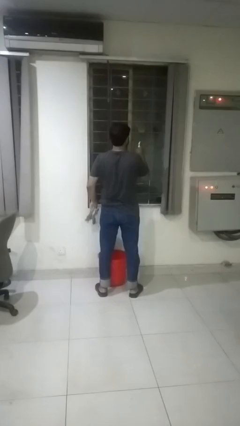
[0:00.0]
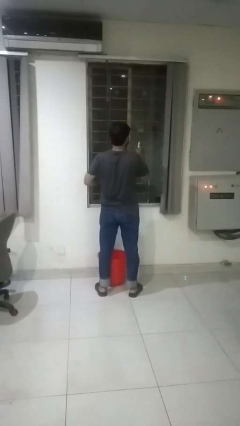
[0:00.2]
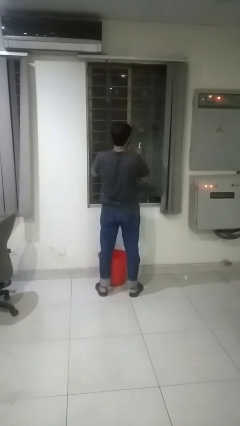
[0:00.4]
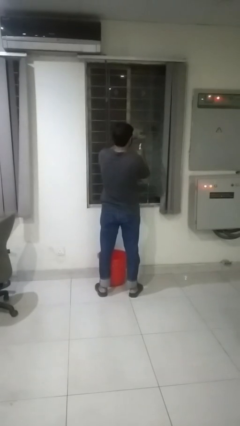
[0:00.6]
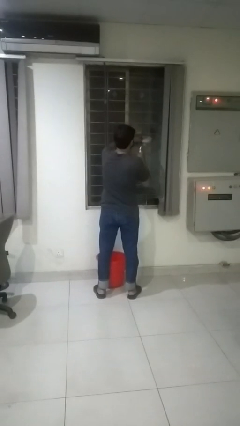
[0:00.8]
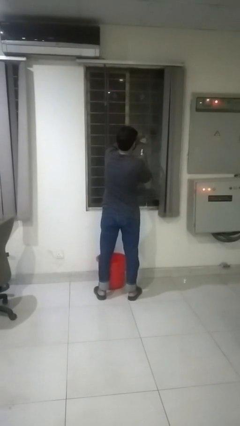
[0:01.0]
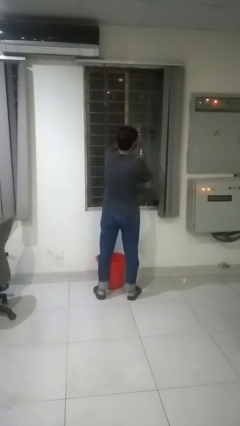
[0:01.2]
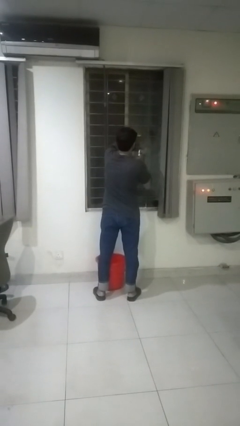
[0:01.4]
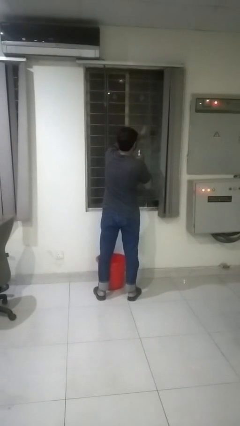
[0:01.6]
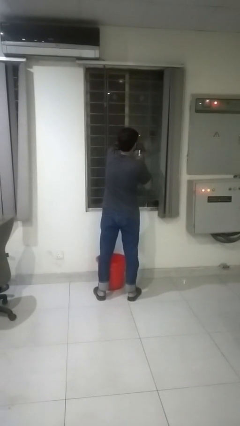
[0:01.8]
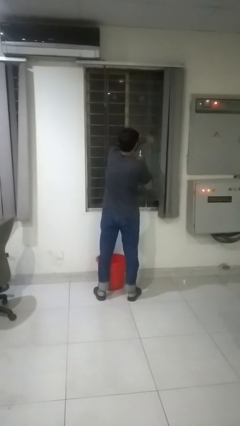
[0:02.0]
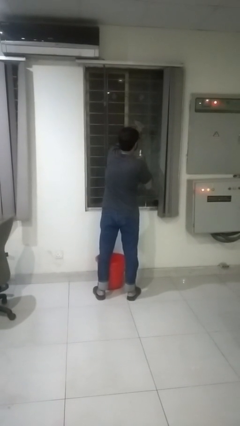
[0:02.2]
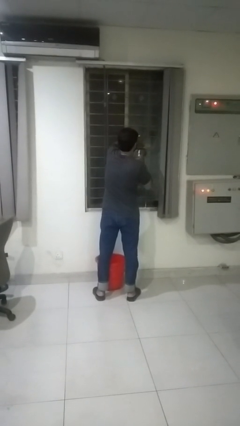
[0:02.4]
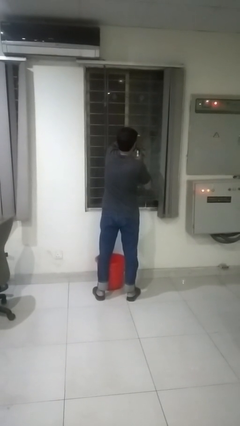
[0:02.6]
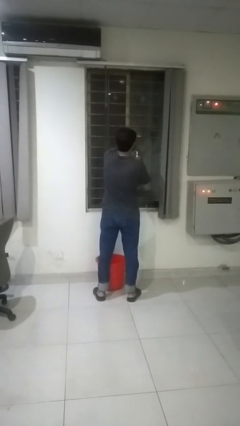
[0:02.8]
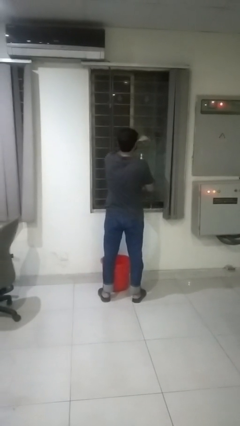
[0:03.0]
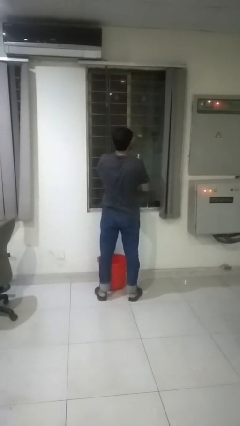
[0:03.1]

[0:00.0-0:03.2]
person washes window

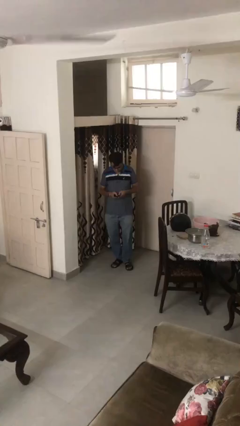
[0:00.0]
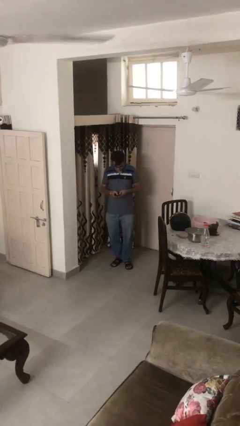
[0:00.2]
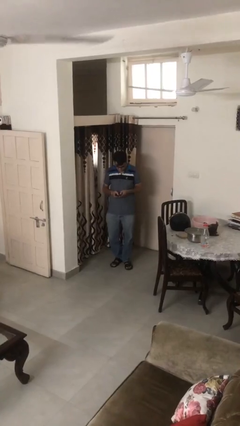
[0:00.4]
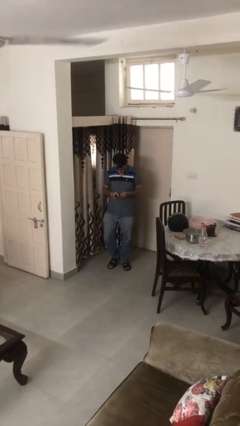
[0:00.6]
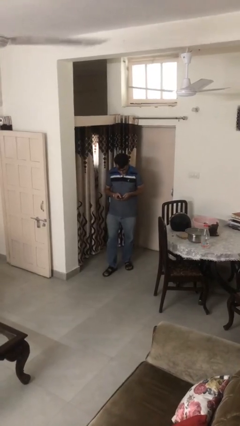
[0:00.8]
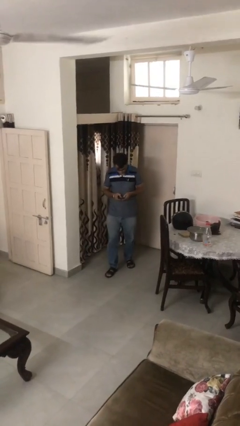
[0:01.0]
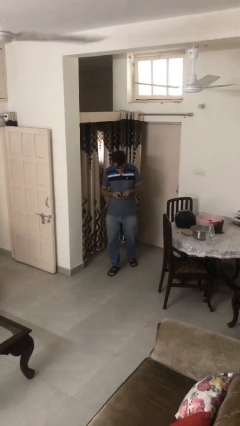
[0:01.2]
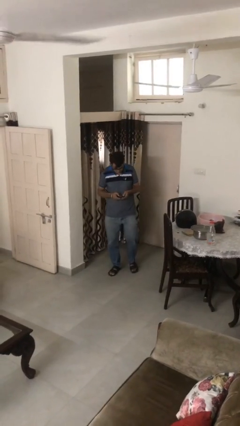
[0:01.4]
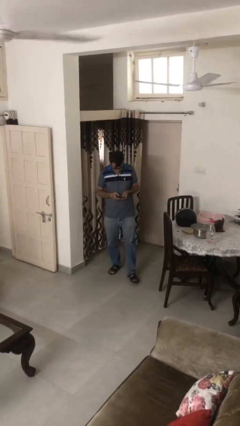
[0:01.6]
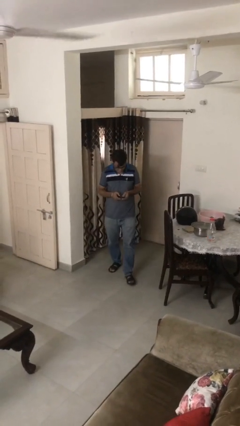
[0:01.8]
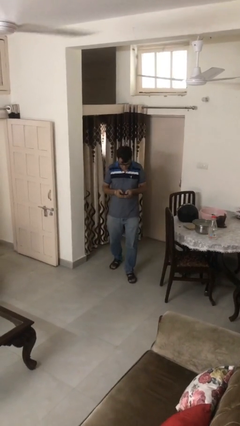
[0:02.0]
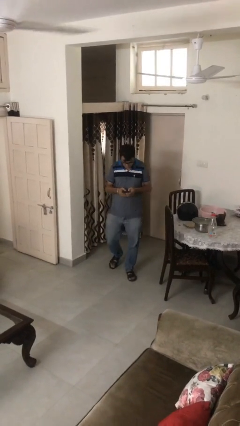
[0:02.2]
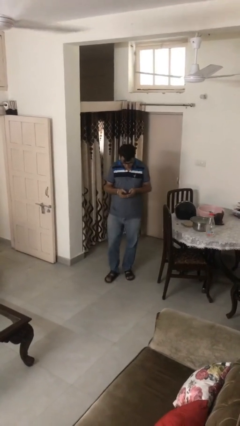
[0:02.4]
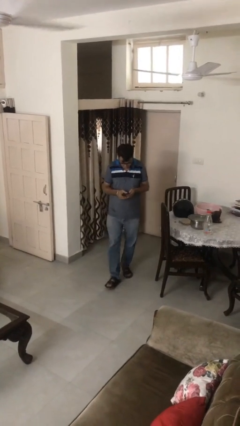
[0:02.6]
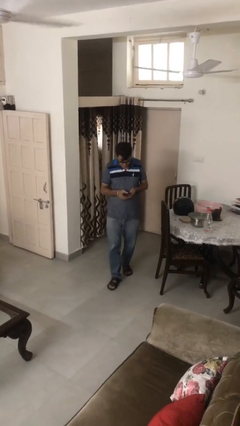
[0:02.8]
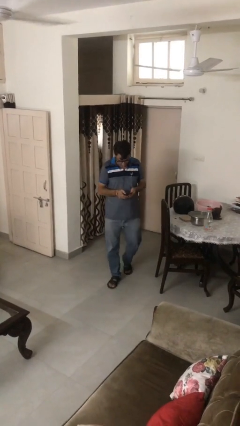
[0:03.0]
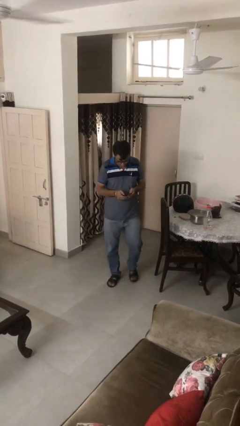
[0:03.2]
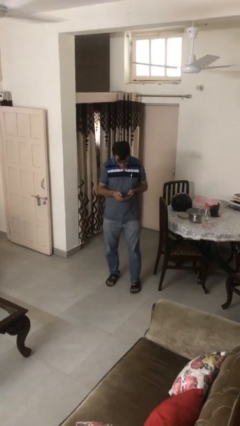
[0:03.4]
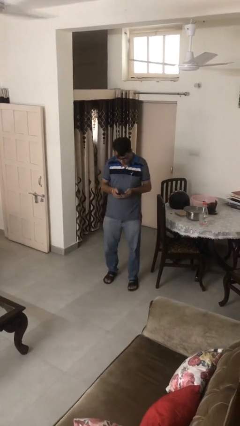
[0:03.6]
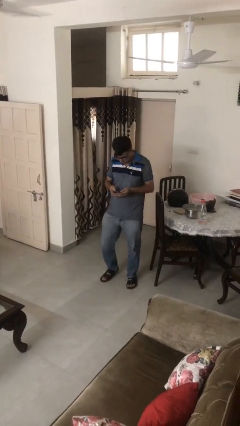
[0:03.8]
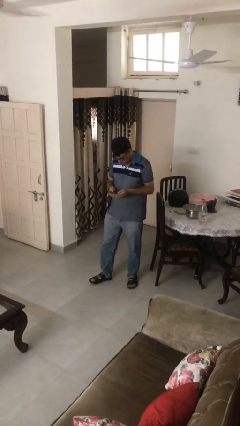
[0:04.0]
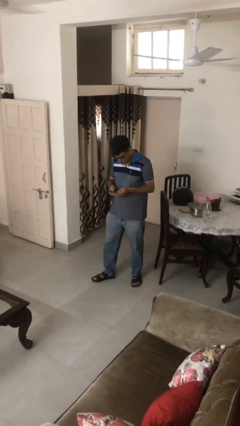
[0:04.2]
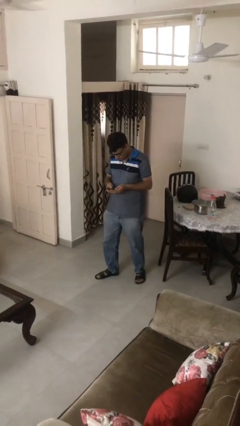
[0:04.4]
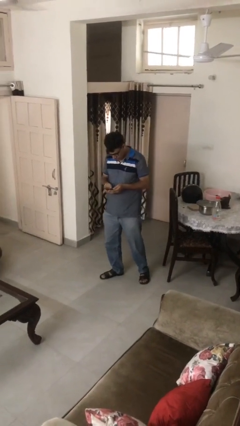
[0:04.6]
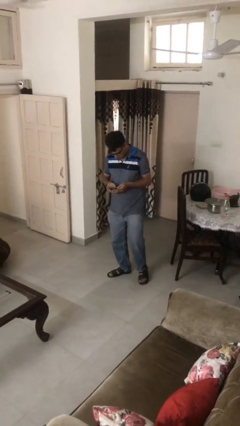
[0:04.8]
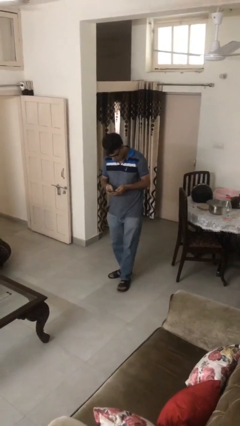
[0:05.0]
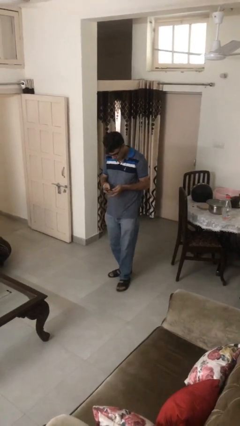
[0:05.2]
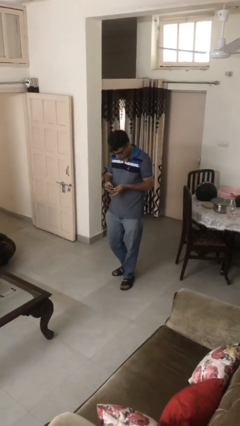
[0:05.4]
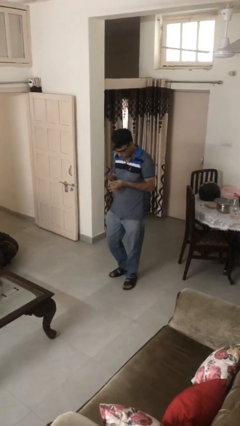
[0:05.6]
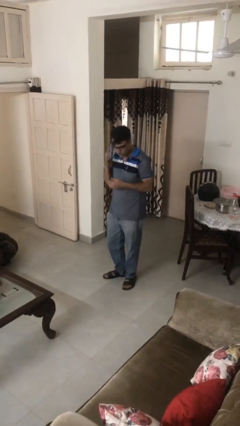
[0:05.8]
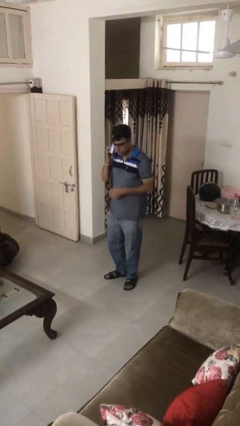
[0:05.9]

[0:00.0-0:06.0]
person texts on phone

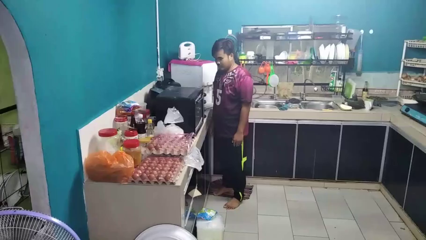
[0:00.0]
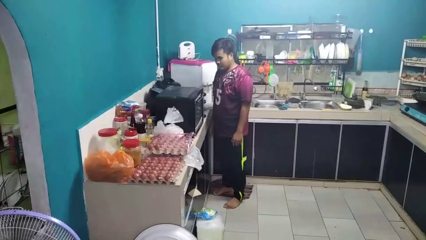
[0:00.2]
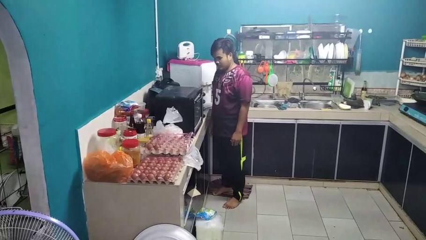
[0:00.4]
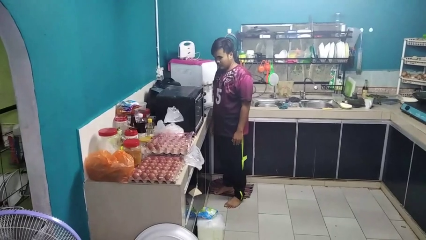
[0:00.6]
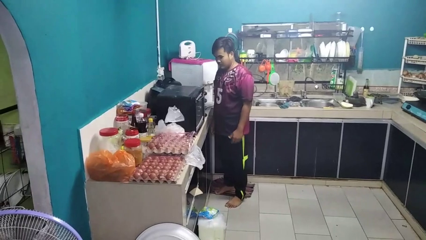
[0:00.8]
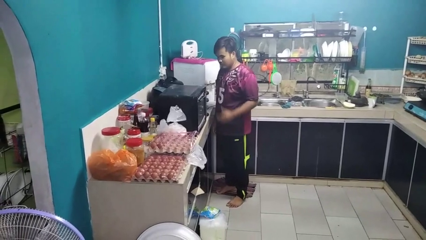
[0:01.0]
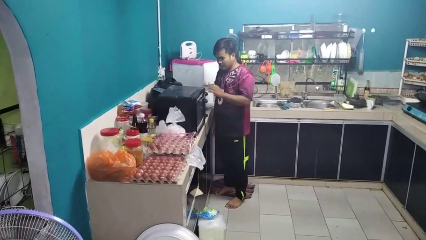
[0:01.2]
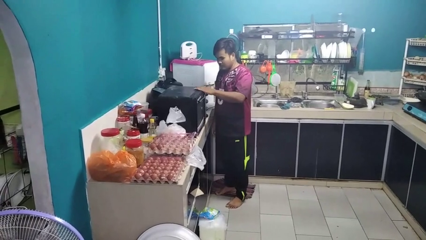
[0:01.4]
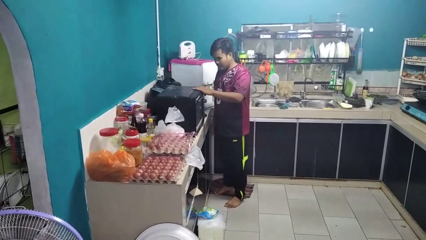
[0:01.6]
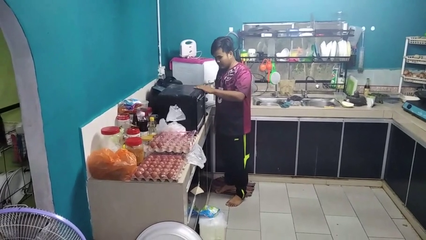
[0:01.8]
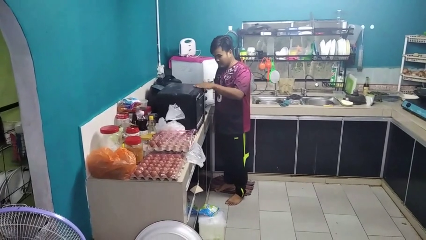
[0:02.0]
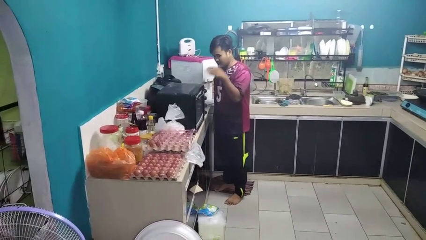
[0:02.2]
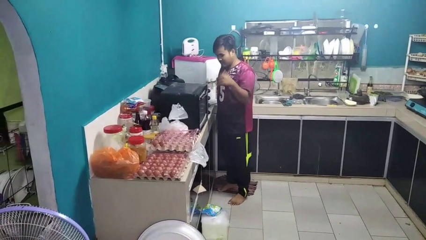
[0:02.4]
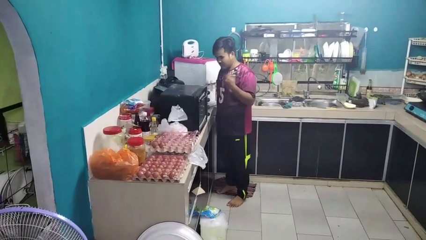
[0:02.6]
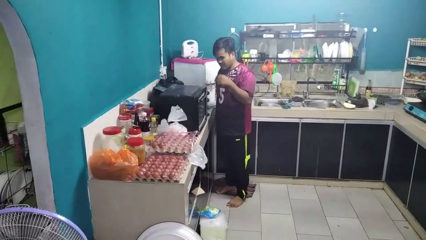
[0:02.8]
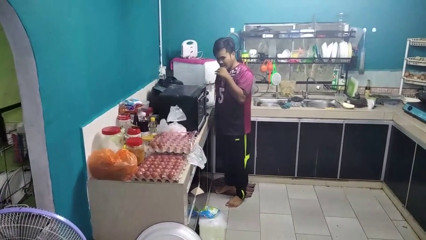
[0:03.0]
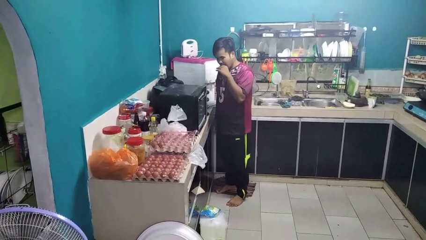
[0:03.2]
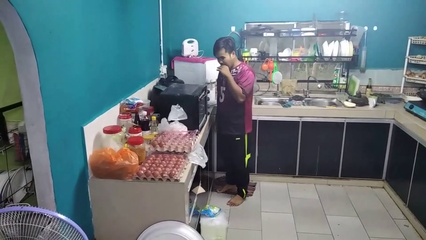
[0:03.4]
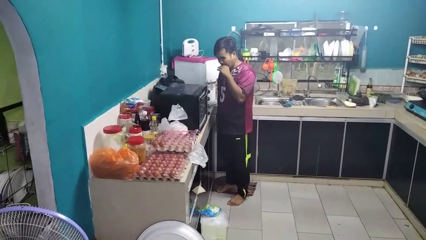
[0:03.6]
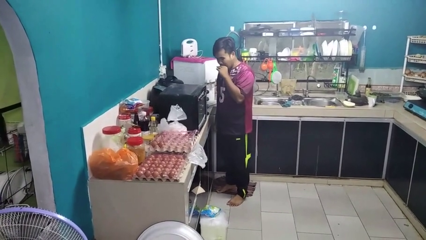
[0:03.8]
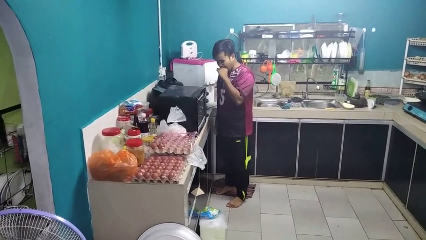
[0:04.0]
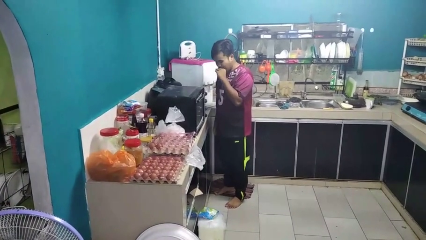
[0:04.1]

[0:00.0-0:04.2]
person burns hand

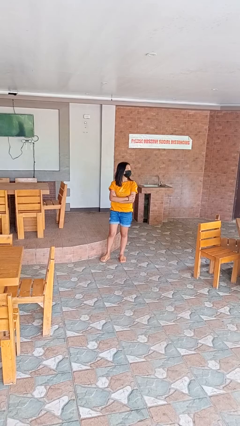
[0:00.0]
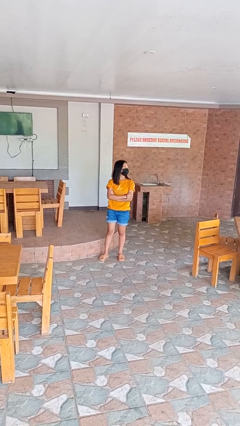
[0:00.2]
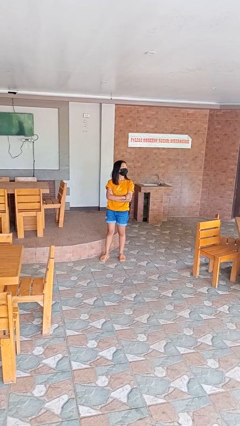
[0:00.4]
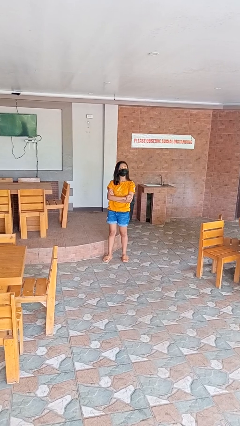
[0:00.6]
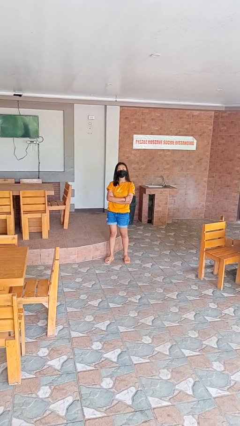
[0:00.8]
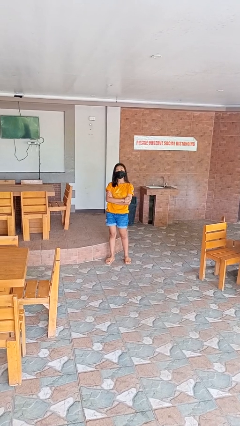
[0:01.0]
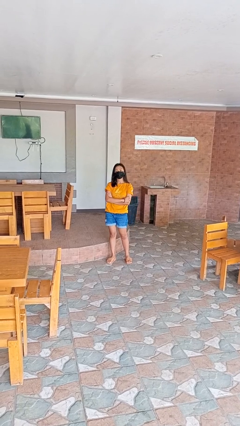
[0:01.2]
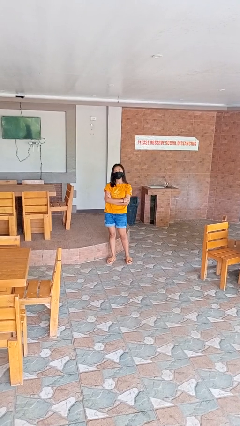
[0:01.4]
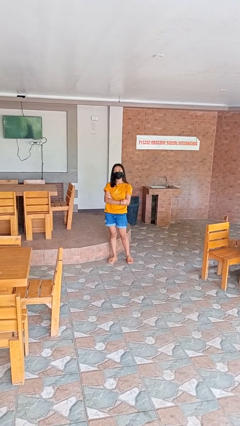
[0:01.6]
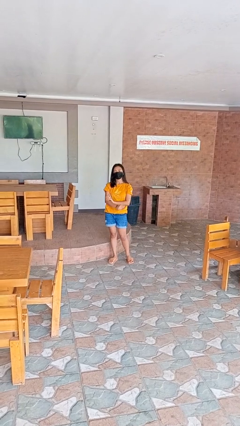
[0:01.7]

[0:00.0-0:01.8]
person crosses arms

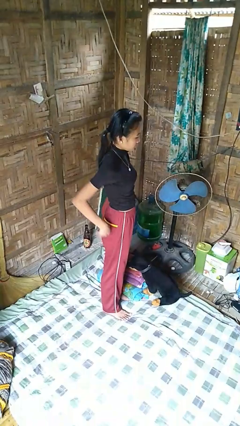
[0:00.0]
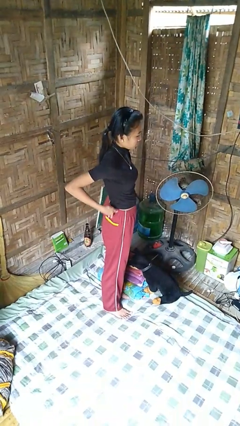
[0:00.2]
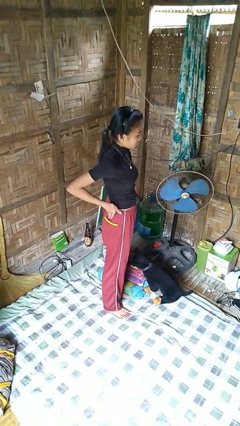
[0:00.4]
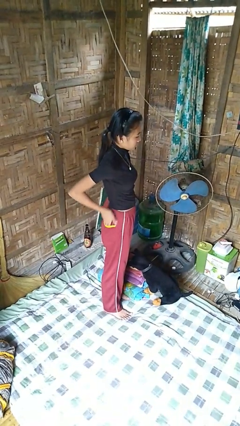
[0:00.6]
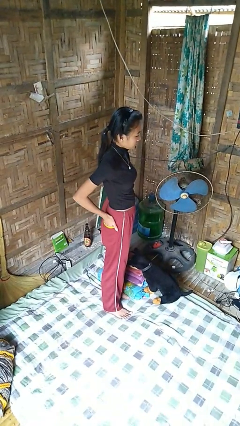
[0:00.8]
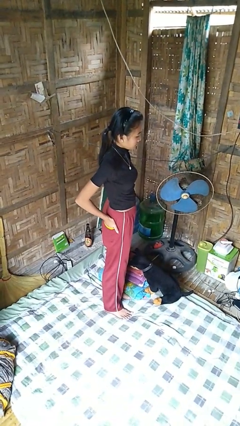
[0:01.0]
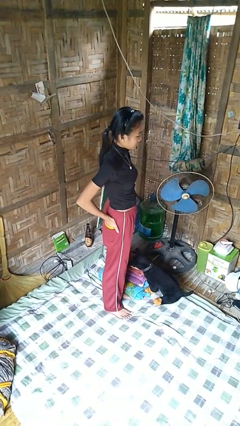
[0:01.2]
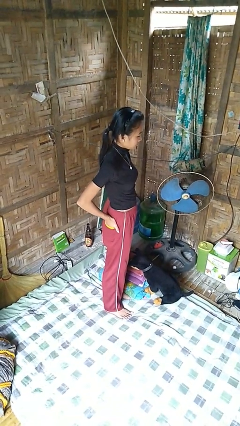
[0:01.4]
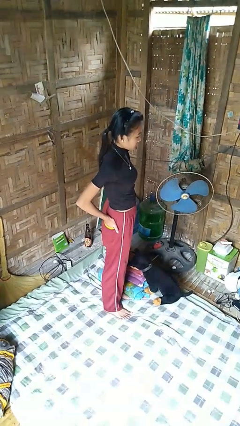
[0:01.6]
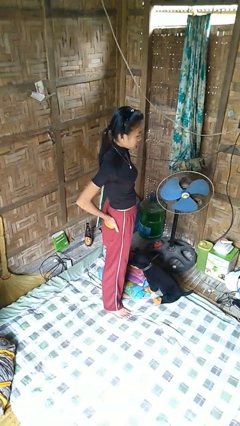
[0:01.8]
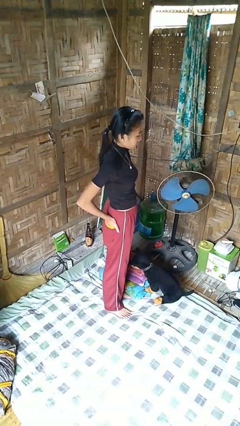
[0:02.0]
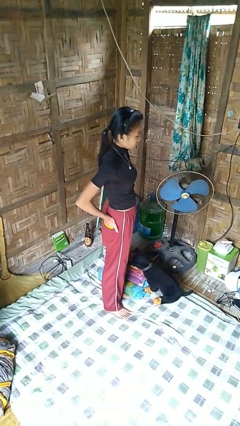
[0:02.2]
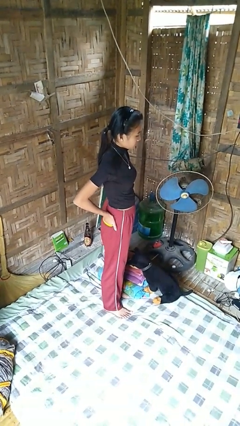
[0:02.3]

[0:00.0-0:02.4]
person puts hands in back pockets

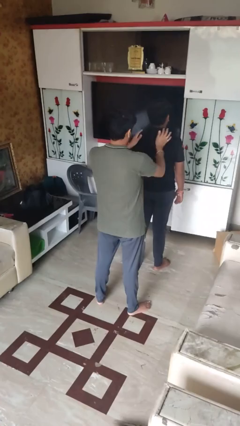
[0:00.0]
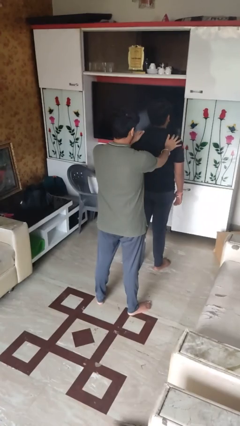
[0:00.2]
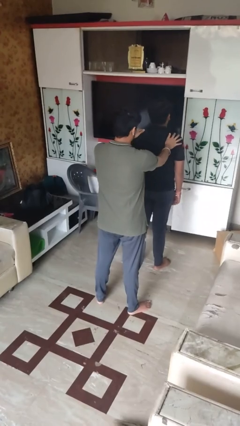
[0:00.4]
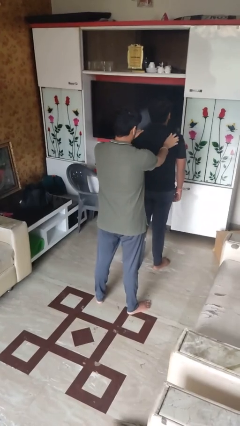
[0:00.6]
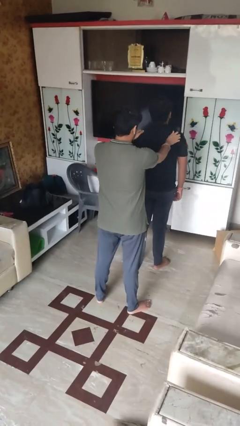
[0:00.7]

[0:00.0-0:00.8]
person grabs person by shoulder
